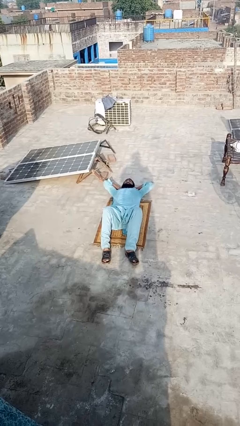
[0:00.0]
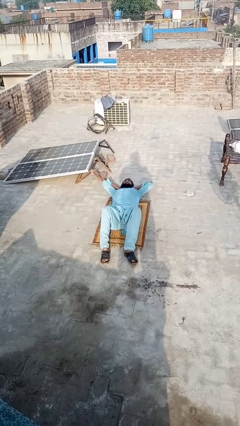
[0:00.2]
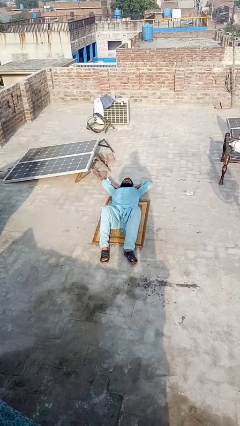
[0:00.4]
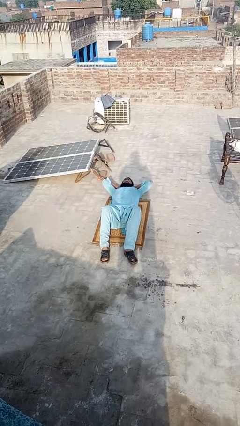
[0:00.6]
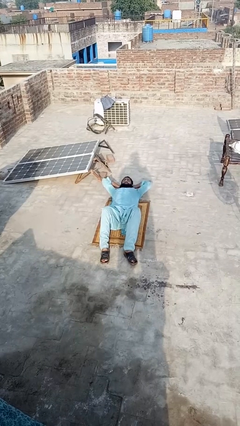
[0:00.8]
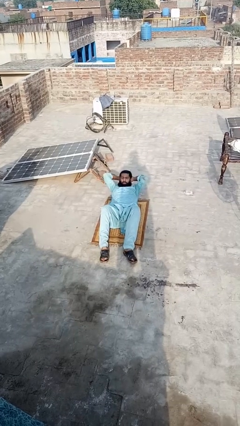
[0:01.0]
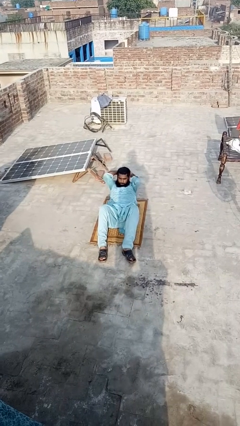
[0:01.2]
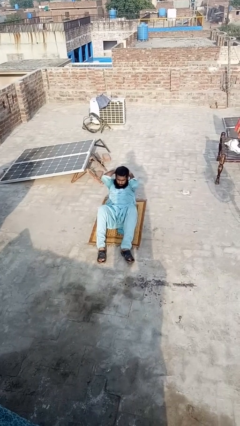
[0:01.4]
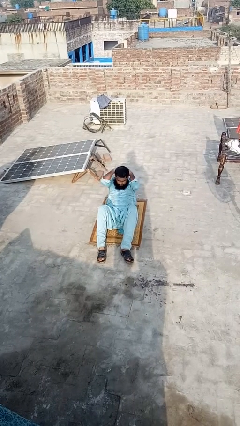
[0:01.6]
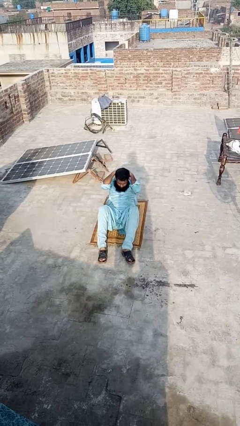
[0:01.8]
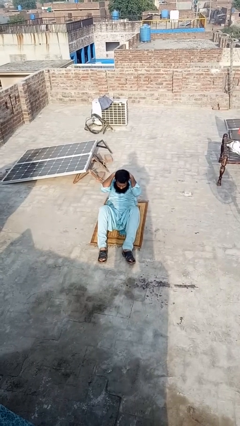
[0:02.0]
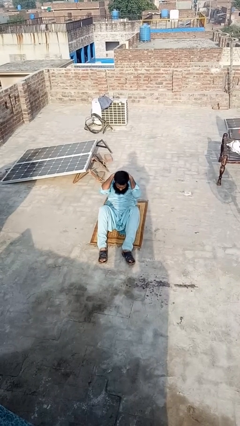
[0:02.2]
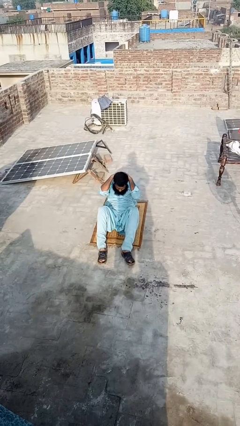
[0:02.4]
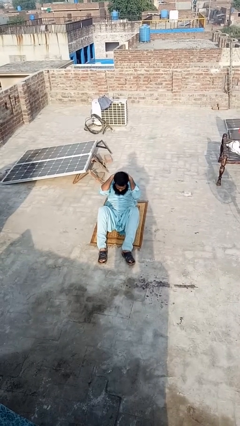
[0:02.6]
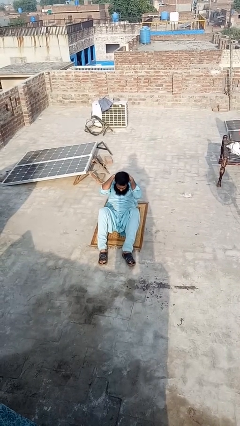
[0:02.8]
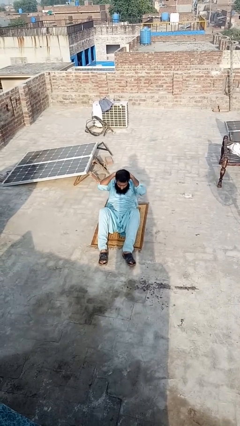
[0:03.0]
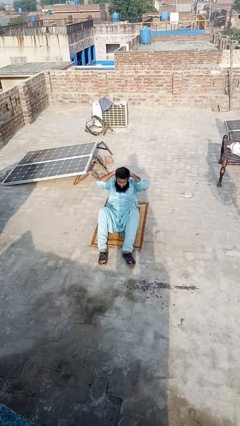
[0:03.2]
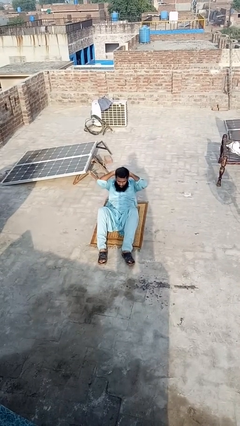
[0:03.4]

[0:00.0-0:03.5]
person exercises with situp

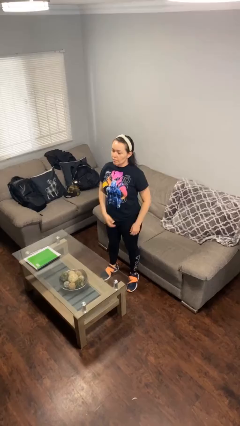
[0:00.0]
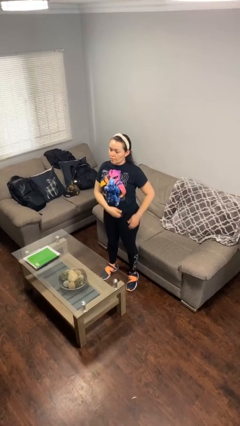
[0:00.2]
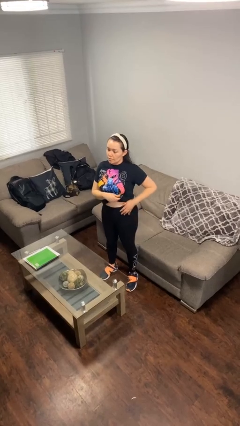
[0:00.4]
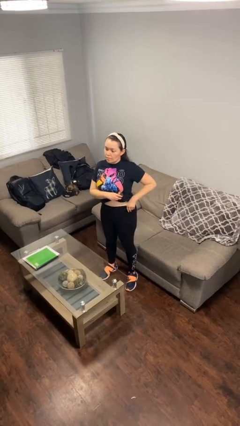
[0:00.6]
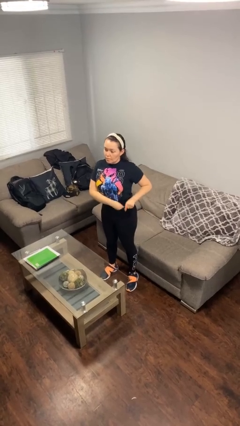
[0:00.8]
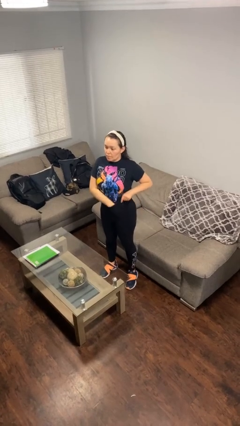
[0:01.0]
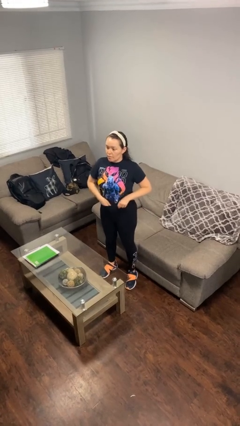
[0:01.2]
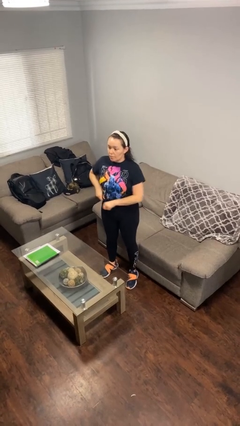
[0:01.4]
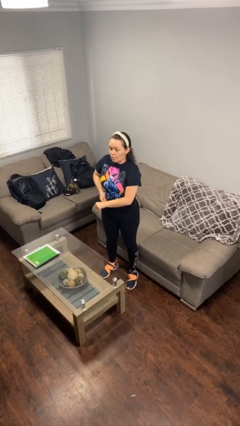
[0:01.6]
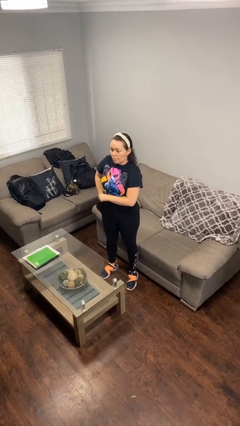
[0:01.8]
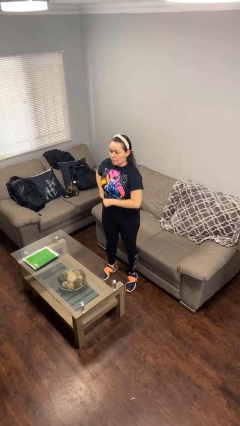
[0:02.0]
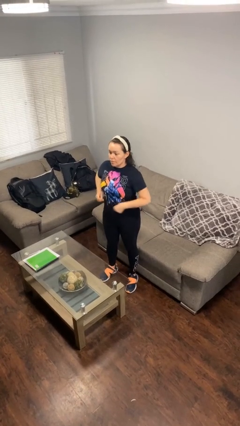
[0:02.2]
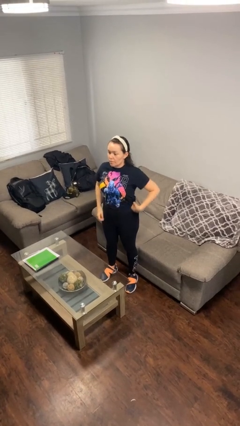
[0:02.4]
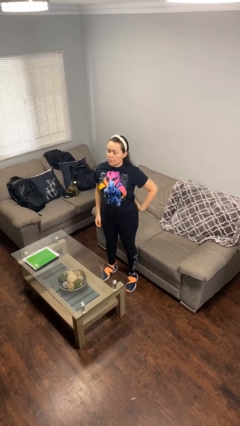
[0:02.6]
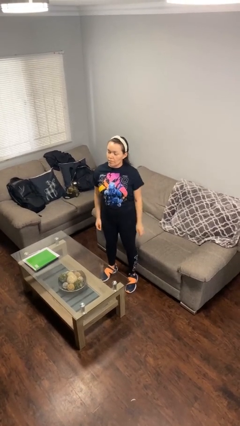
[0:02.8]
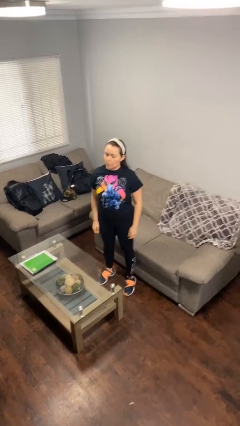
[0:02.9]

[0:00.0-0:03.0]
person tucks in shirt

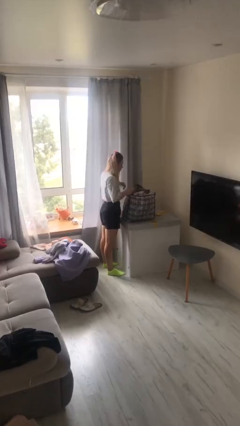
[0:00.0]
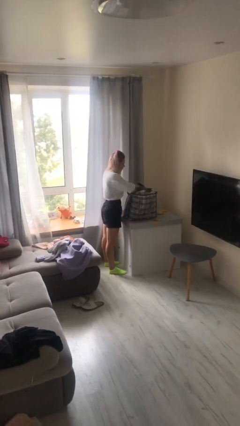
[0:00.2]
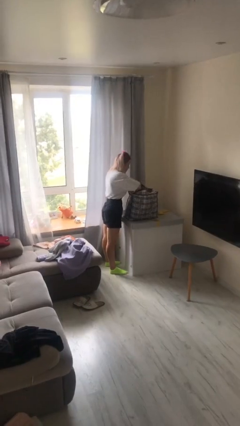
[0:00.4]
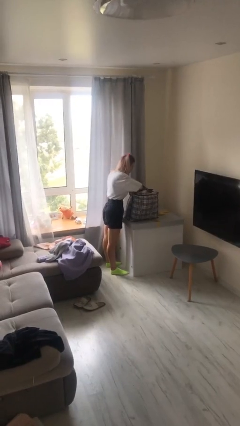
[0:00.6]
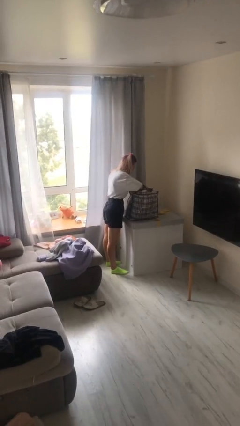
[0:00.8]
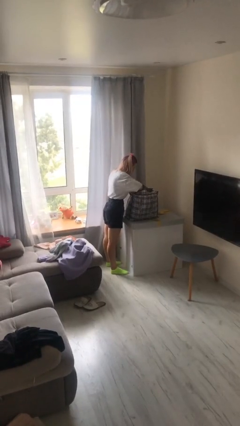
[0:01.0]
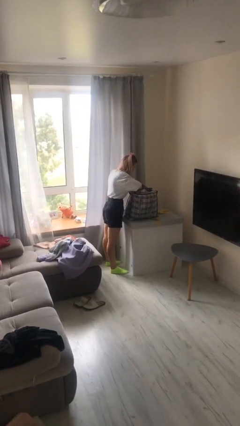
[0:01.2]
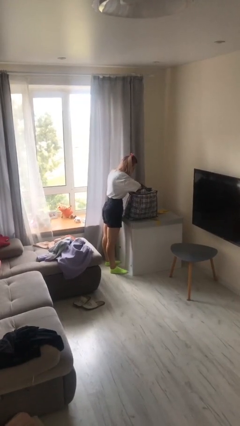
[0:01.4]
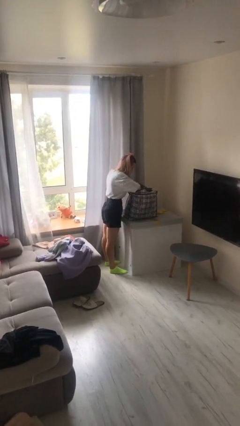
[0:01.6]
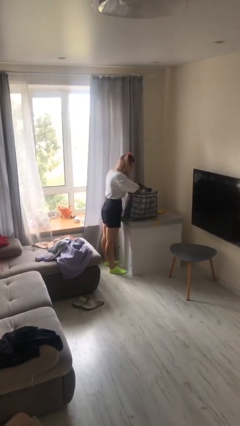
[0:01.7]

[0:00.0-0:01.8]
person searches in bag

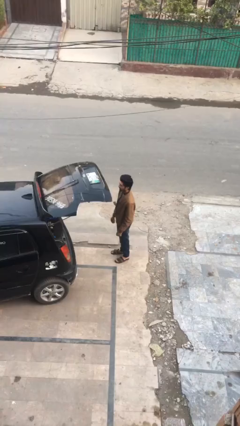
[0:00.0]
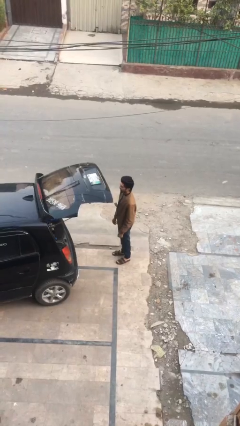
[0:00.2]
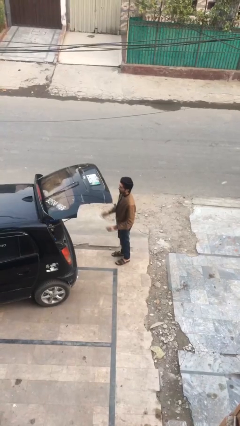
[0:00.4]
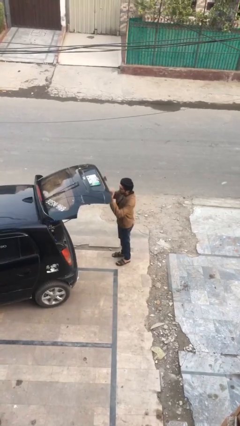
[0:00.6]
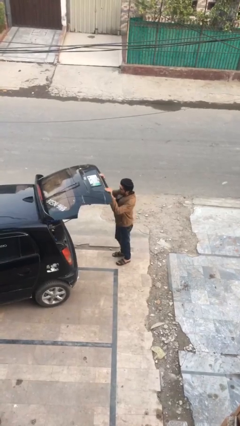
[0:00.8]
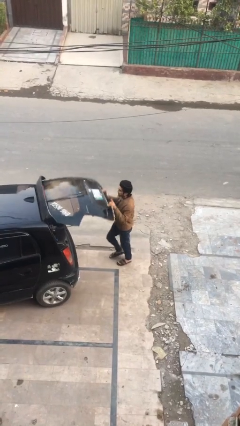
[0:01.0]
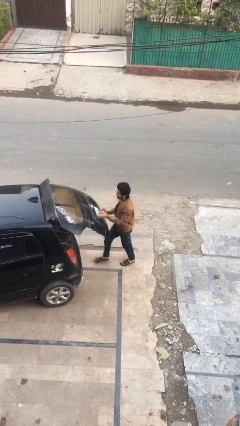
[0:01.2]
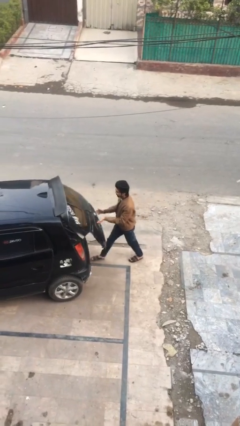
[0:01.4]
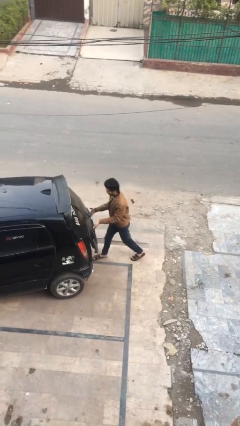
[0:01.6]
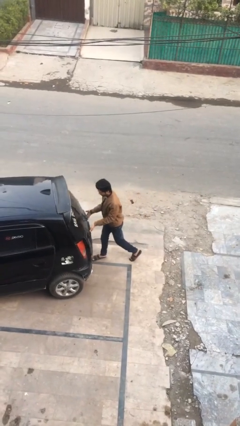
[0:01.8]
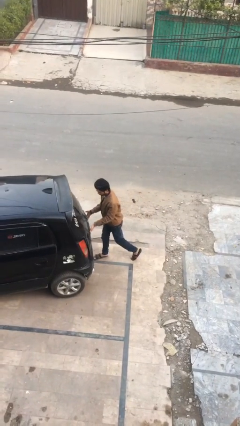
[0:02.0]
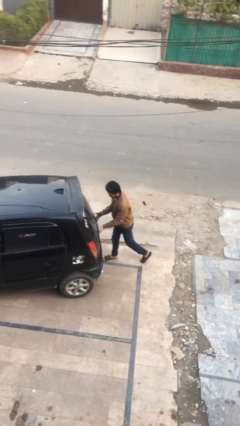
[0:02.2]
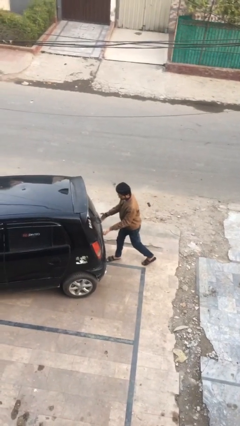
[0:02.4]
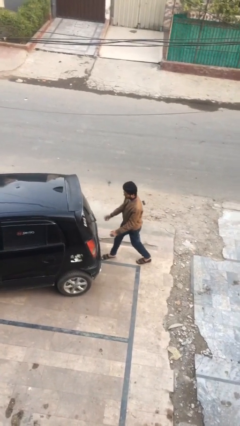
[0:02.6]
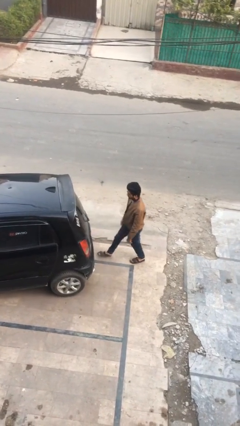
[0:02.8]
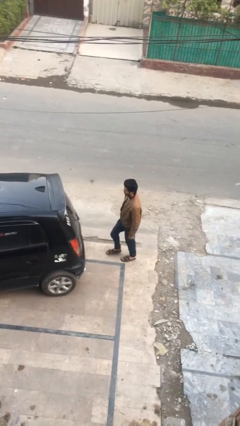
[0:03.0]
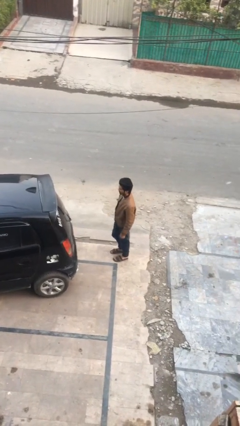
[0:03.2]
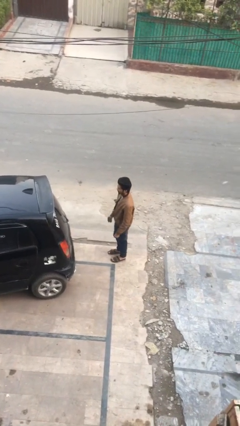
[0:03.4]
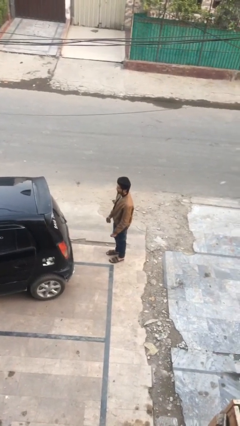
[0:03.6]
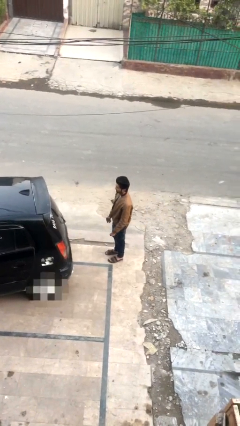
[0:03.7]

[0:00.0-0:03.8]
person closes car trunk

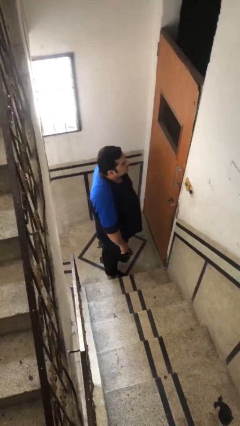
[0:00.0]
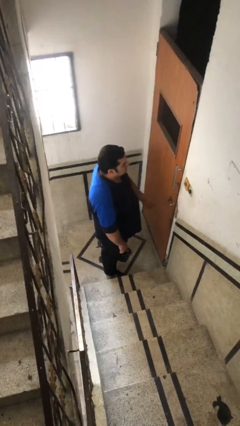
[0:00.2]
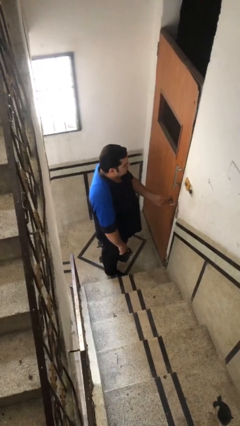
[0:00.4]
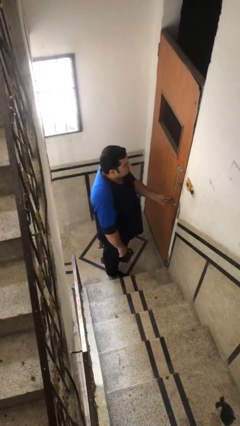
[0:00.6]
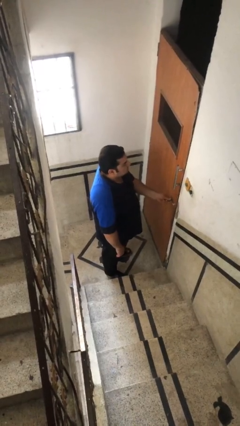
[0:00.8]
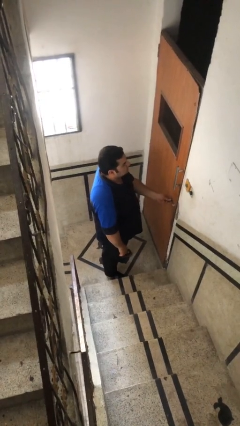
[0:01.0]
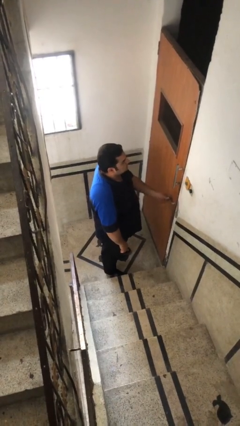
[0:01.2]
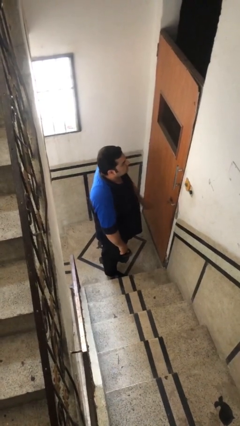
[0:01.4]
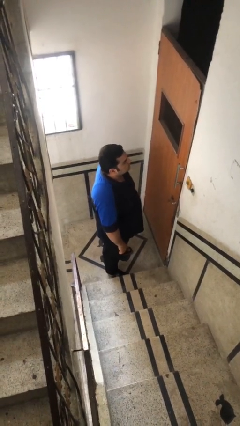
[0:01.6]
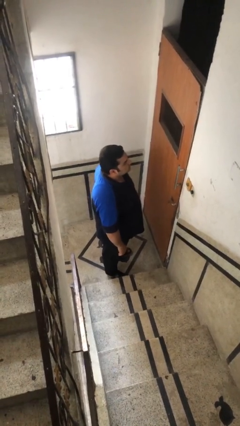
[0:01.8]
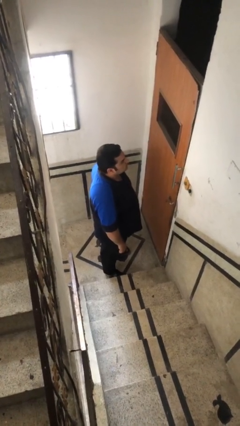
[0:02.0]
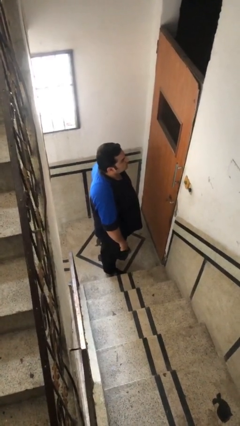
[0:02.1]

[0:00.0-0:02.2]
person locks door with keys

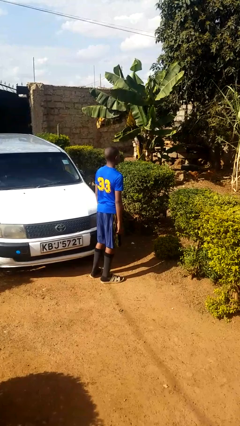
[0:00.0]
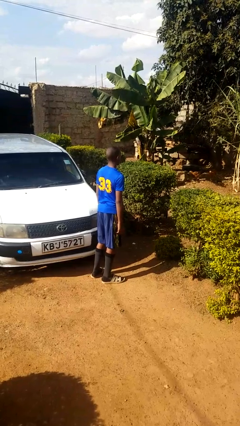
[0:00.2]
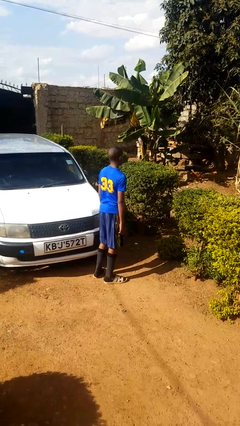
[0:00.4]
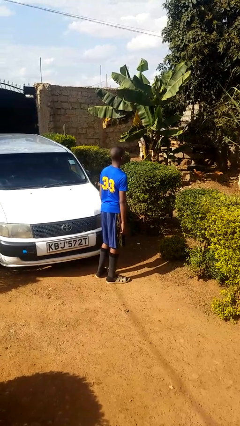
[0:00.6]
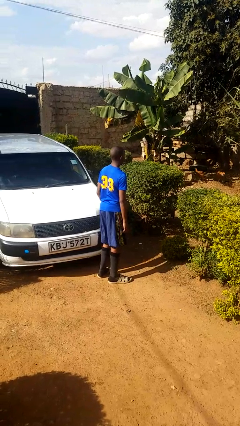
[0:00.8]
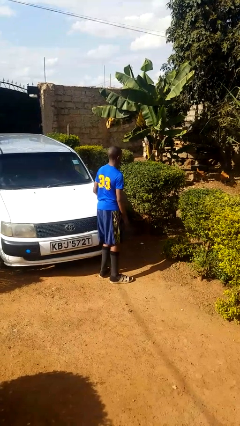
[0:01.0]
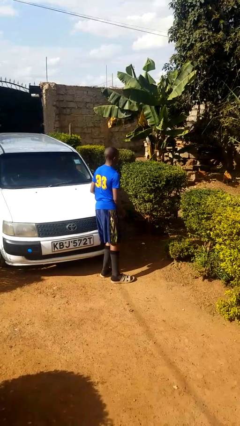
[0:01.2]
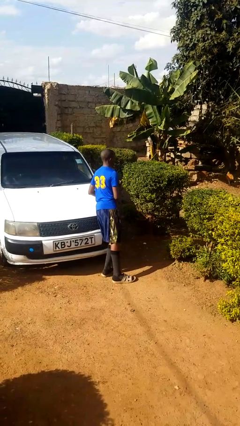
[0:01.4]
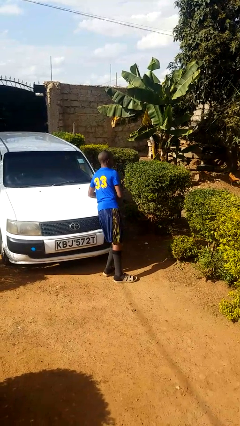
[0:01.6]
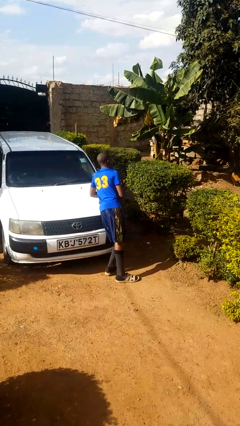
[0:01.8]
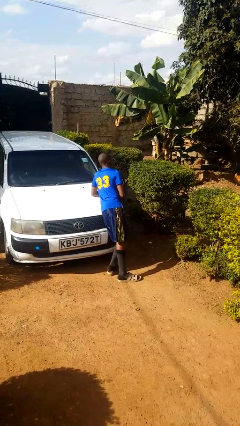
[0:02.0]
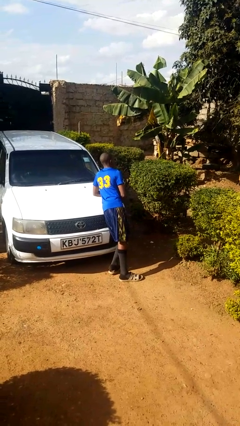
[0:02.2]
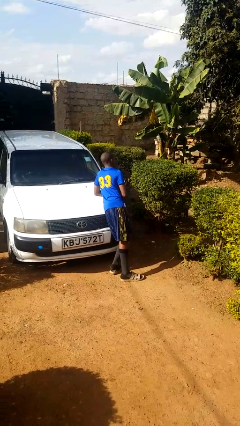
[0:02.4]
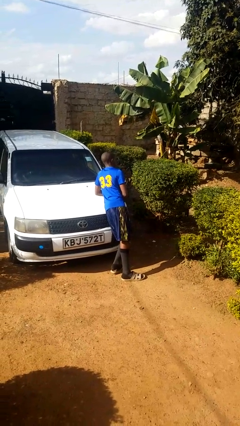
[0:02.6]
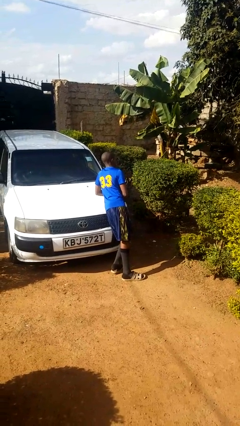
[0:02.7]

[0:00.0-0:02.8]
person leans against car

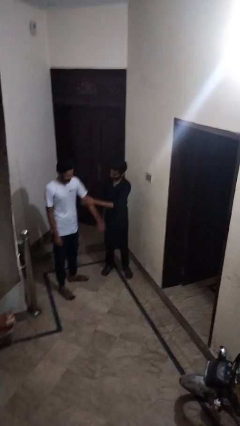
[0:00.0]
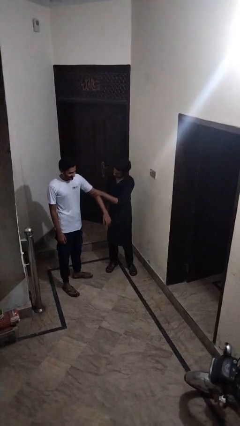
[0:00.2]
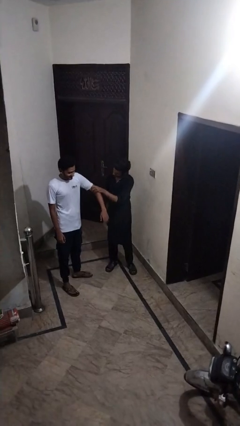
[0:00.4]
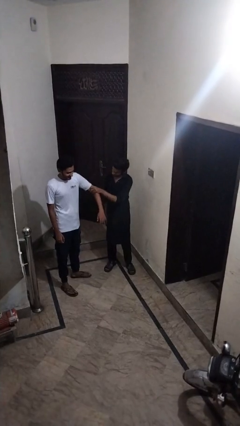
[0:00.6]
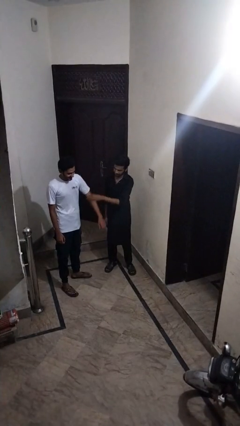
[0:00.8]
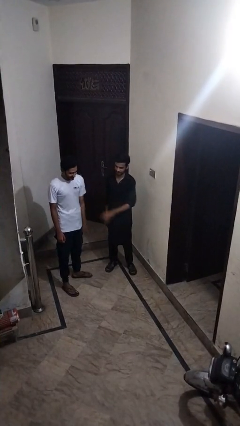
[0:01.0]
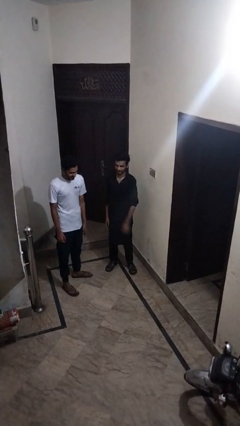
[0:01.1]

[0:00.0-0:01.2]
person grabs person by bicep
